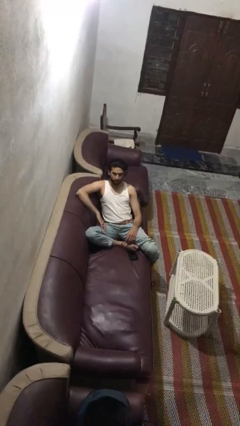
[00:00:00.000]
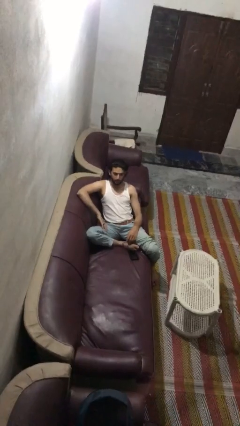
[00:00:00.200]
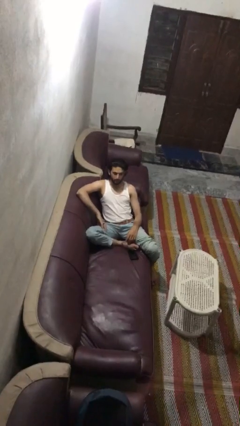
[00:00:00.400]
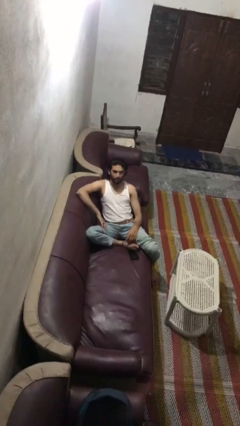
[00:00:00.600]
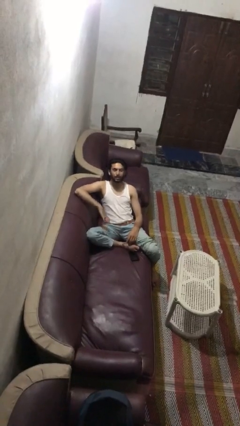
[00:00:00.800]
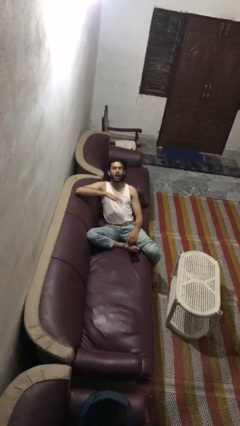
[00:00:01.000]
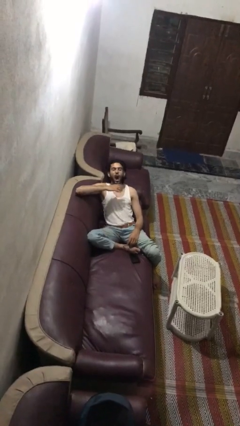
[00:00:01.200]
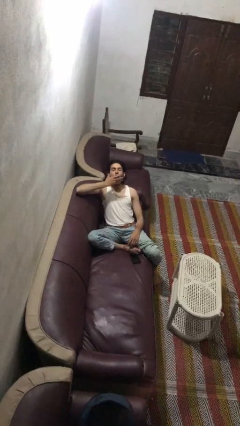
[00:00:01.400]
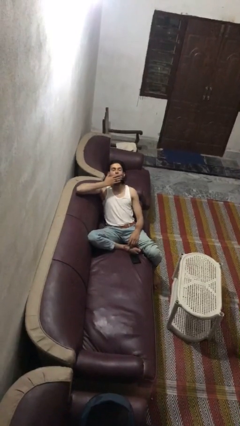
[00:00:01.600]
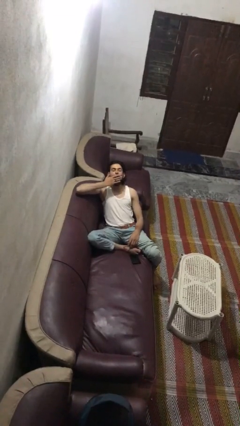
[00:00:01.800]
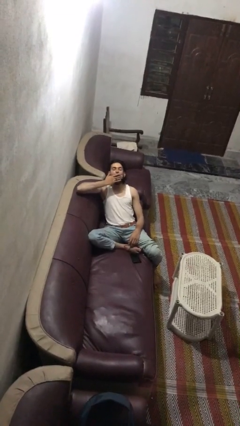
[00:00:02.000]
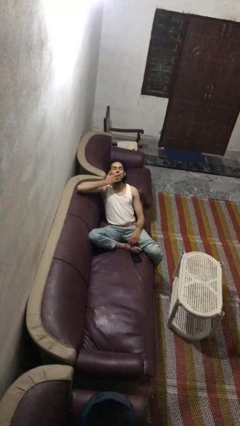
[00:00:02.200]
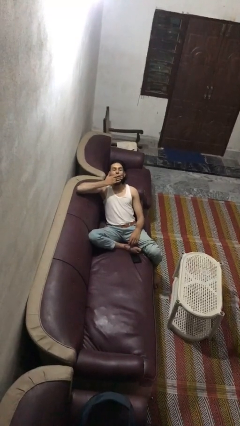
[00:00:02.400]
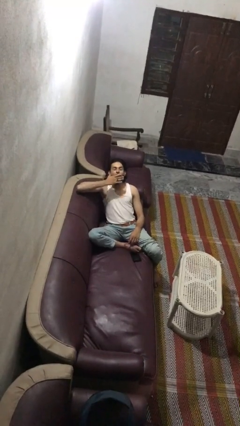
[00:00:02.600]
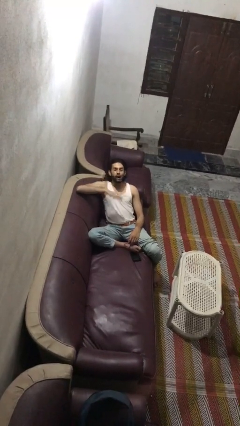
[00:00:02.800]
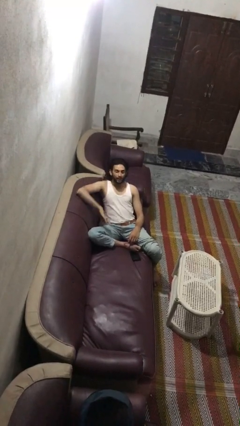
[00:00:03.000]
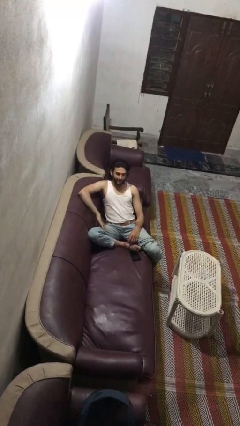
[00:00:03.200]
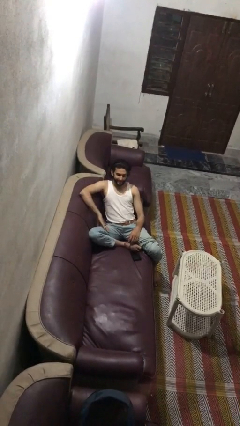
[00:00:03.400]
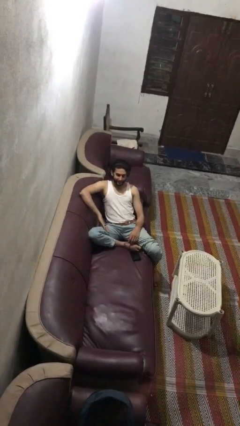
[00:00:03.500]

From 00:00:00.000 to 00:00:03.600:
person yawns

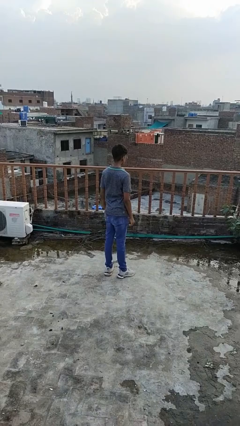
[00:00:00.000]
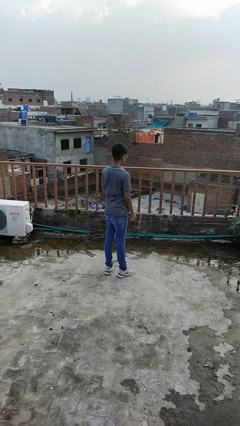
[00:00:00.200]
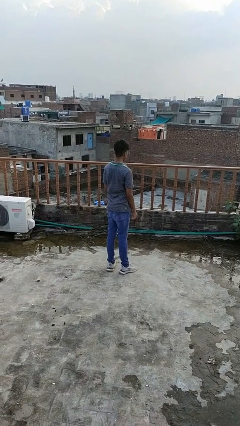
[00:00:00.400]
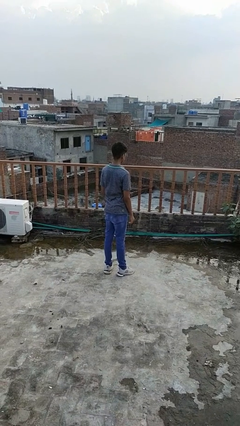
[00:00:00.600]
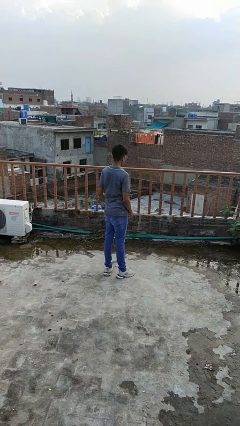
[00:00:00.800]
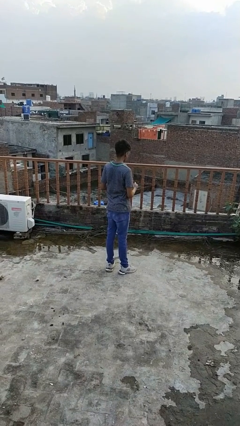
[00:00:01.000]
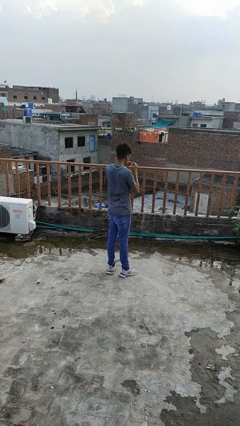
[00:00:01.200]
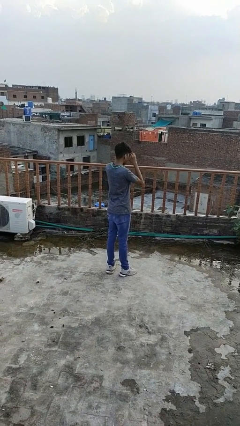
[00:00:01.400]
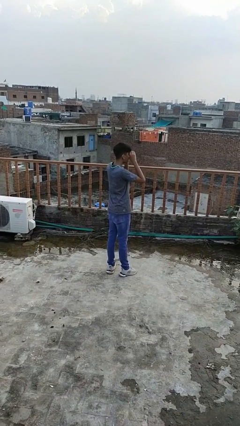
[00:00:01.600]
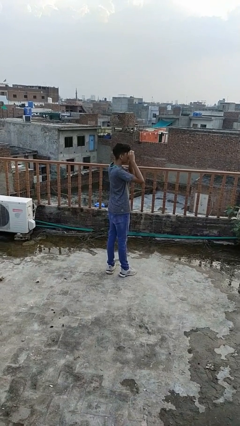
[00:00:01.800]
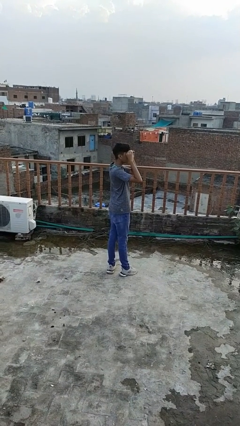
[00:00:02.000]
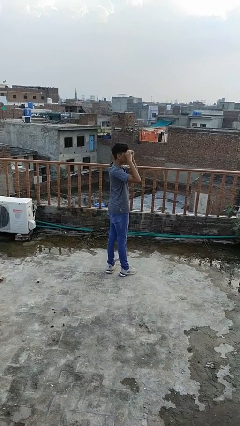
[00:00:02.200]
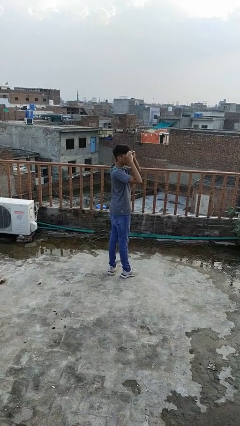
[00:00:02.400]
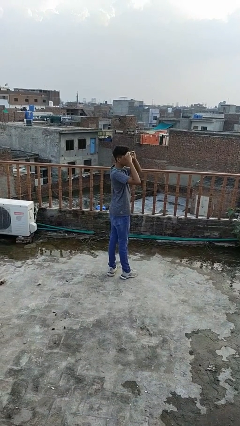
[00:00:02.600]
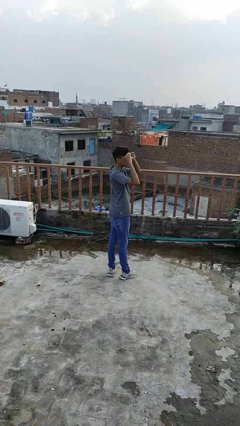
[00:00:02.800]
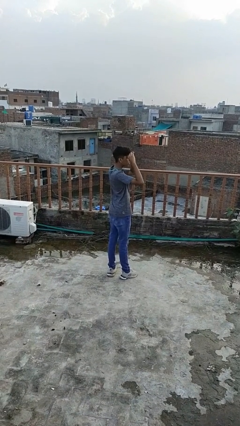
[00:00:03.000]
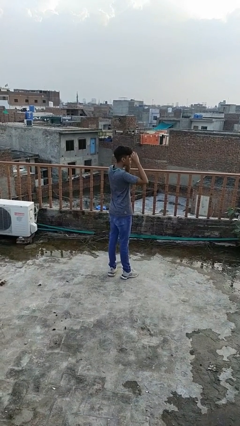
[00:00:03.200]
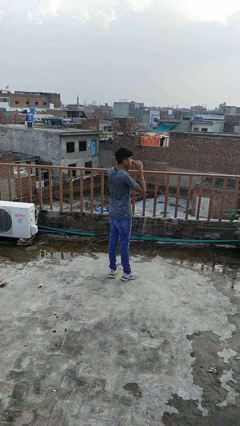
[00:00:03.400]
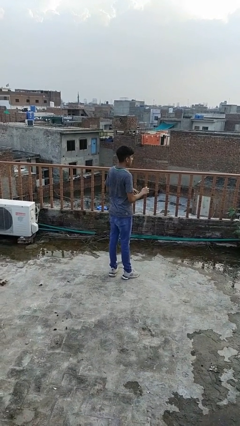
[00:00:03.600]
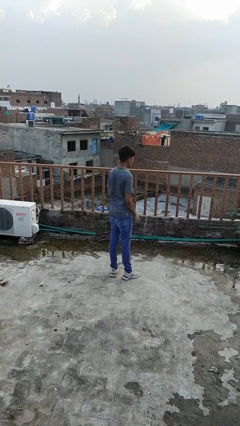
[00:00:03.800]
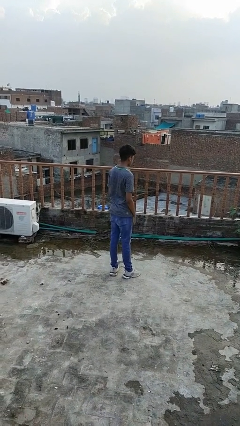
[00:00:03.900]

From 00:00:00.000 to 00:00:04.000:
person shades eyes

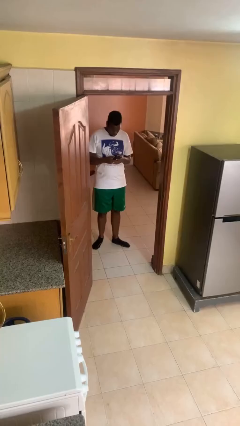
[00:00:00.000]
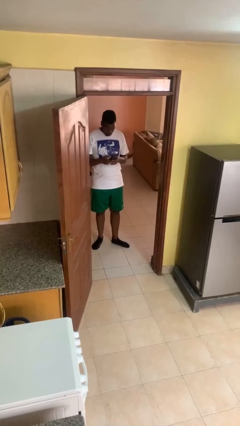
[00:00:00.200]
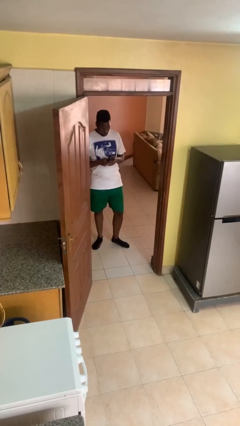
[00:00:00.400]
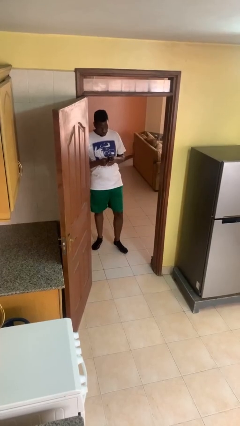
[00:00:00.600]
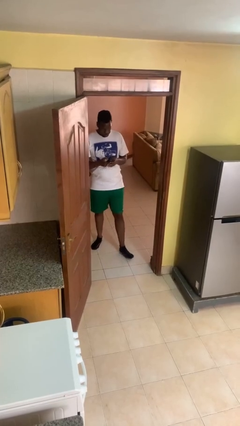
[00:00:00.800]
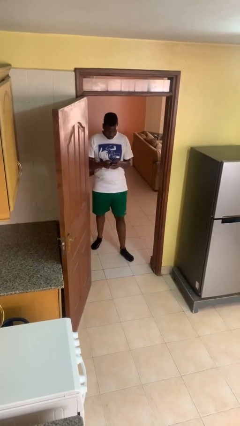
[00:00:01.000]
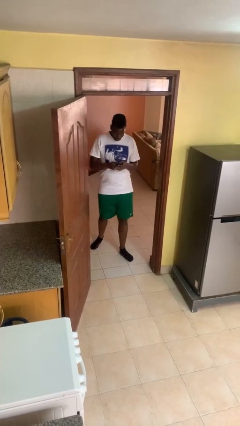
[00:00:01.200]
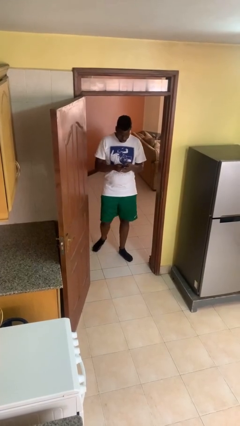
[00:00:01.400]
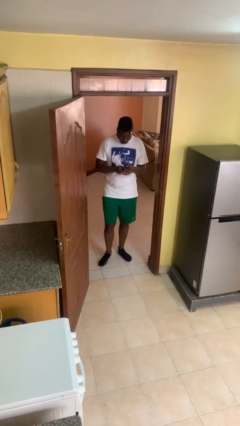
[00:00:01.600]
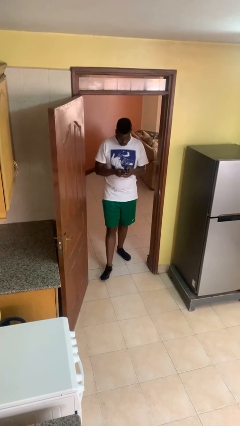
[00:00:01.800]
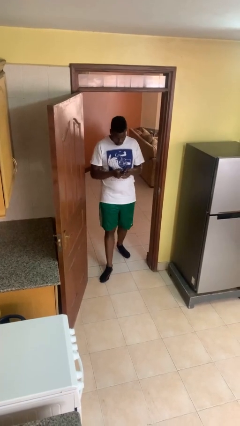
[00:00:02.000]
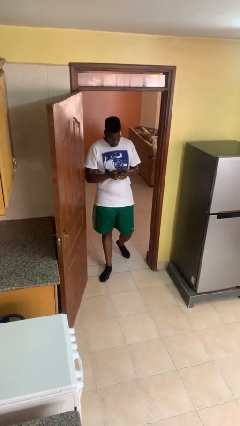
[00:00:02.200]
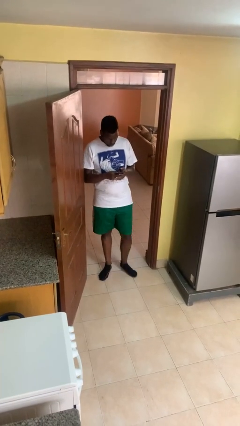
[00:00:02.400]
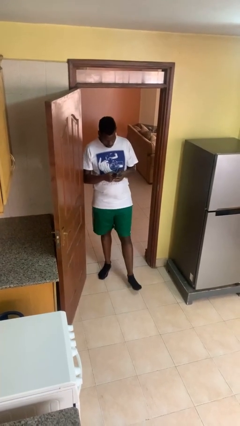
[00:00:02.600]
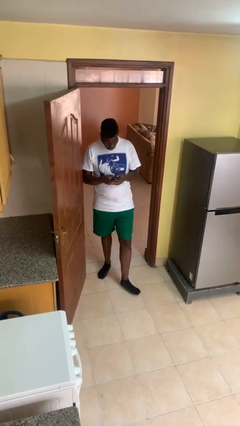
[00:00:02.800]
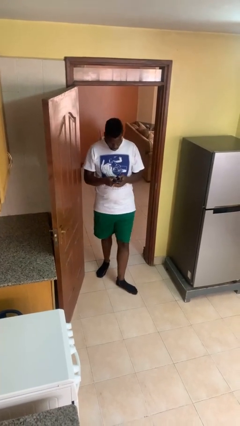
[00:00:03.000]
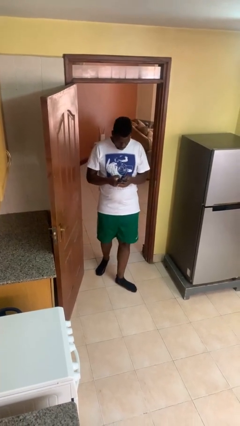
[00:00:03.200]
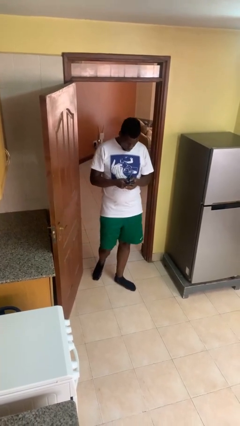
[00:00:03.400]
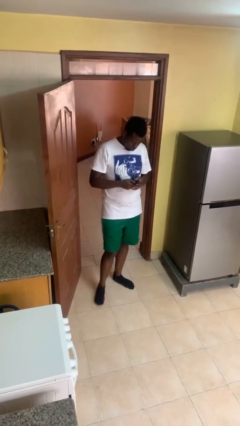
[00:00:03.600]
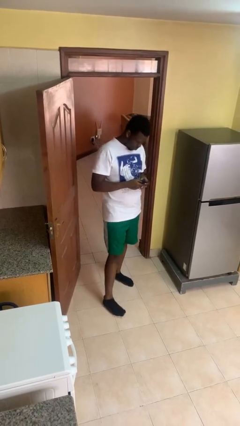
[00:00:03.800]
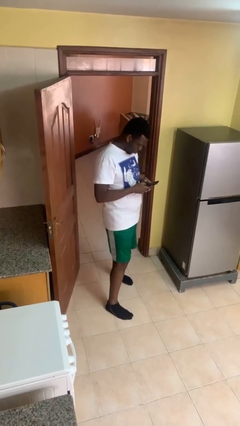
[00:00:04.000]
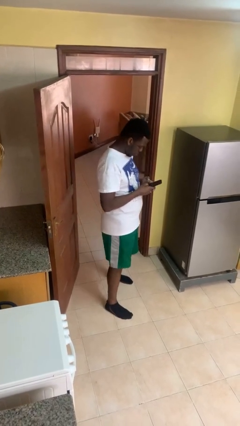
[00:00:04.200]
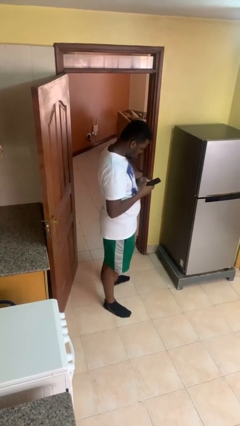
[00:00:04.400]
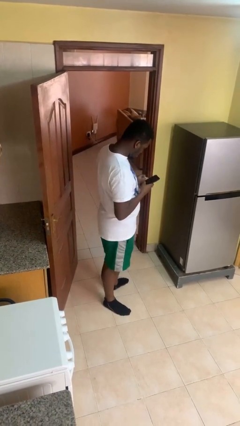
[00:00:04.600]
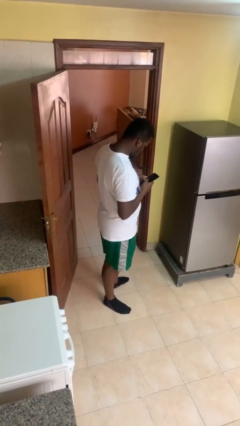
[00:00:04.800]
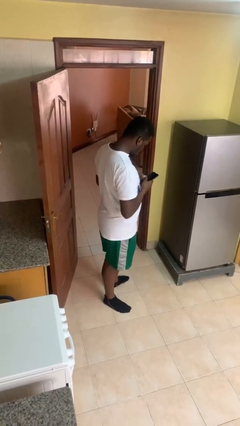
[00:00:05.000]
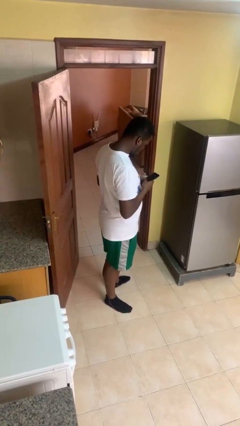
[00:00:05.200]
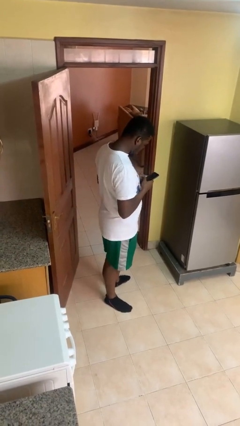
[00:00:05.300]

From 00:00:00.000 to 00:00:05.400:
person enters scene through structure

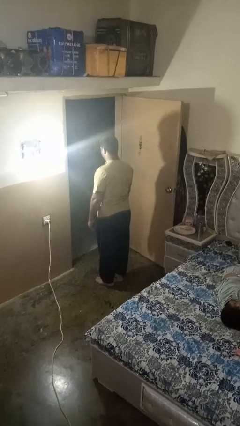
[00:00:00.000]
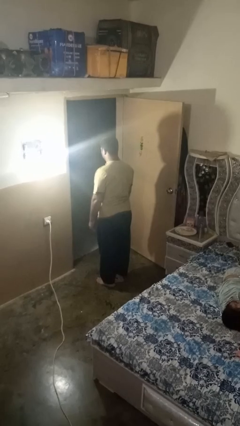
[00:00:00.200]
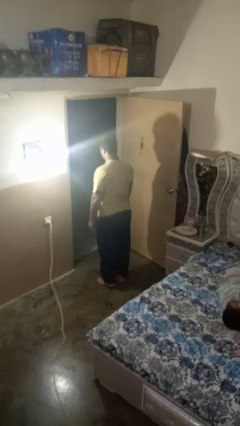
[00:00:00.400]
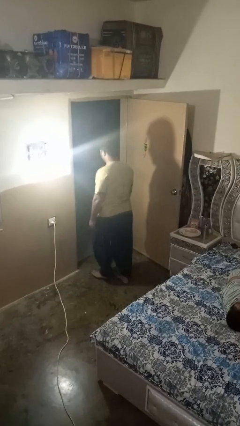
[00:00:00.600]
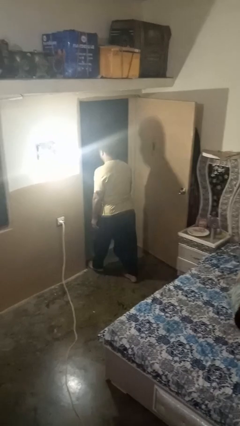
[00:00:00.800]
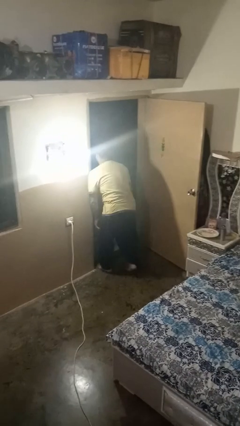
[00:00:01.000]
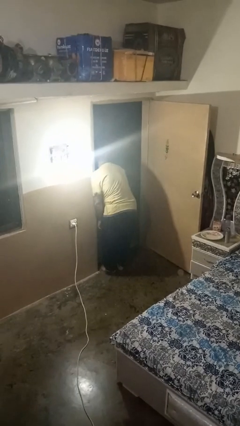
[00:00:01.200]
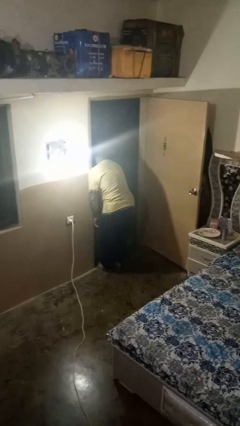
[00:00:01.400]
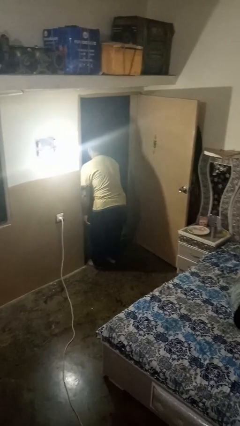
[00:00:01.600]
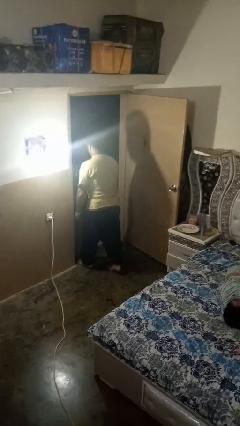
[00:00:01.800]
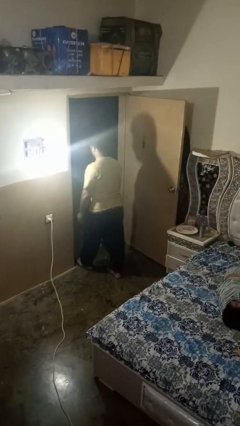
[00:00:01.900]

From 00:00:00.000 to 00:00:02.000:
person bumps into wall

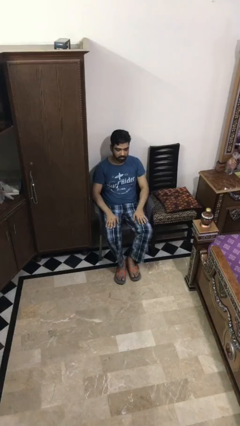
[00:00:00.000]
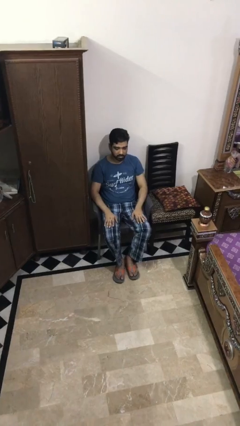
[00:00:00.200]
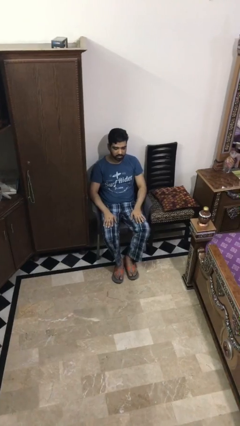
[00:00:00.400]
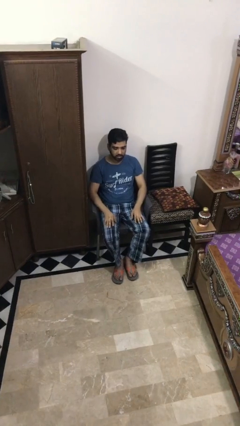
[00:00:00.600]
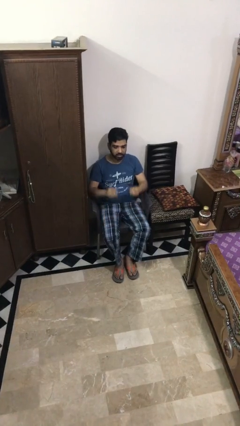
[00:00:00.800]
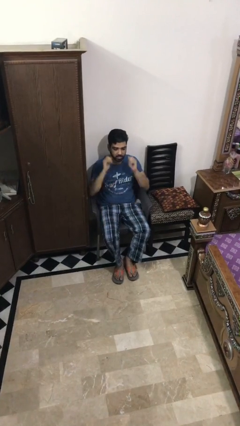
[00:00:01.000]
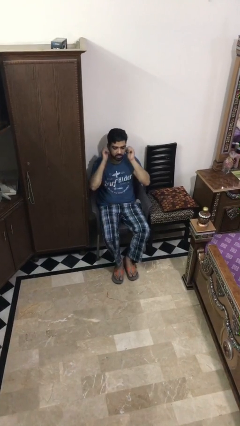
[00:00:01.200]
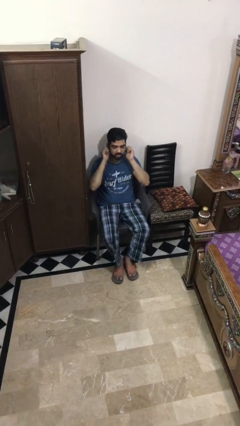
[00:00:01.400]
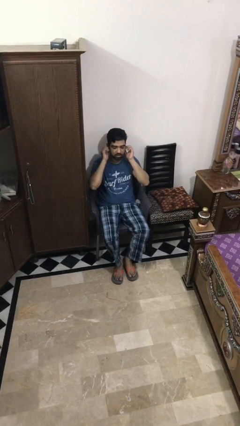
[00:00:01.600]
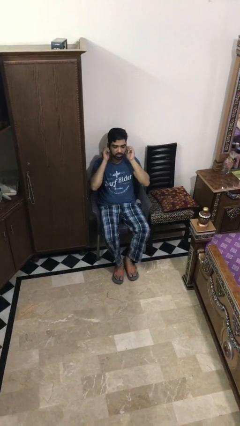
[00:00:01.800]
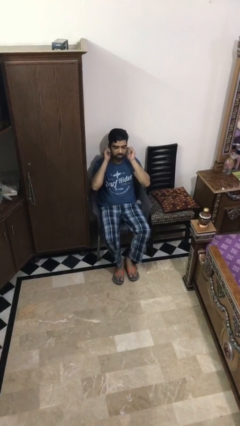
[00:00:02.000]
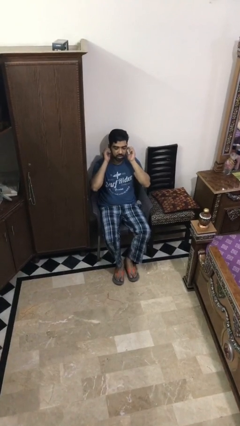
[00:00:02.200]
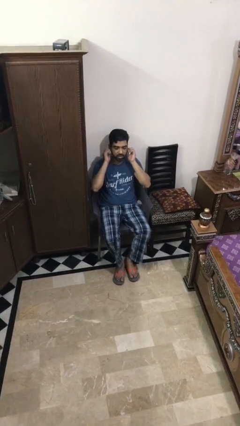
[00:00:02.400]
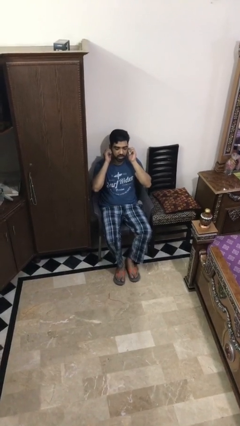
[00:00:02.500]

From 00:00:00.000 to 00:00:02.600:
person touches earlobe
